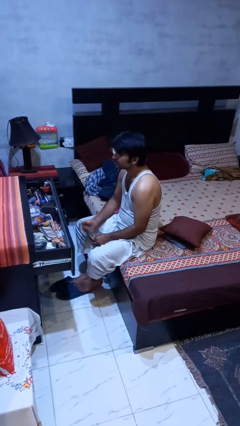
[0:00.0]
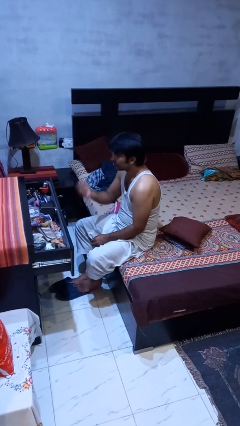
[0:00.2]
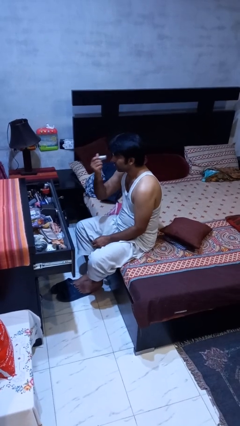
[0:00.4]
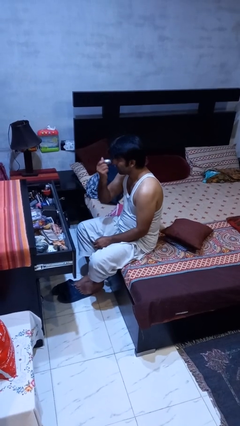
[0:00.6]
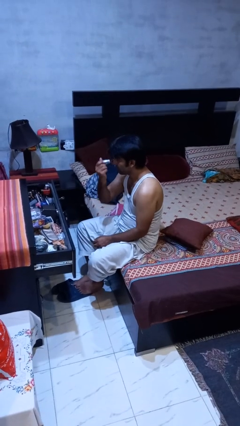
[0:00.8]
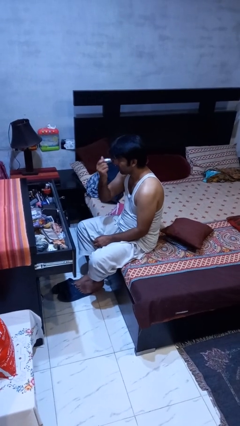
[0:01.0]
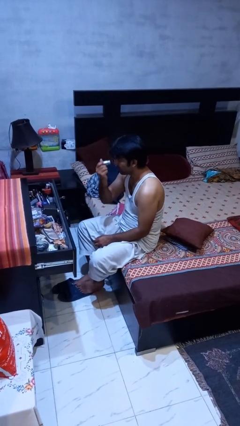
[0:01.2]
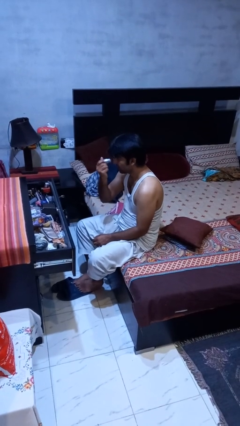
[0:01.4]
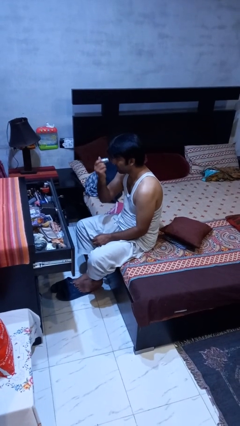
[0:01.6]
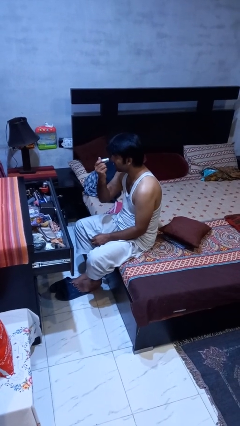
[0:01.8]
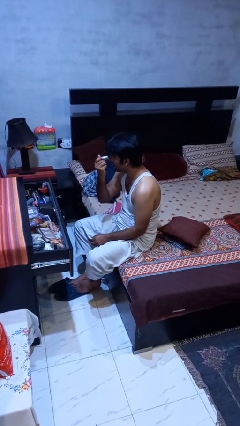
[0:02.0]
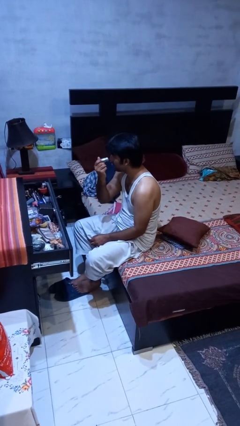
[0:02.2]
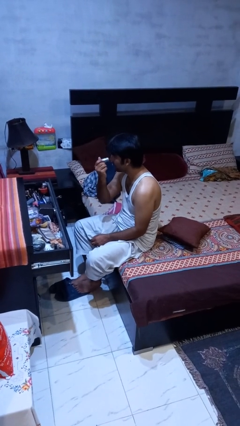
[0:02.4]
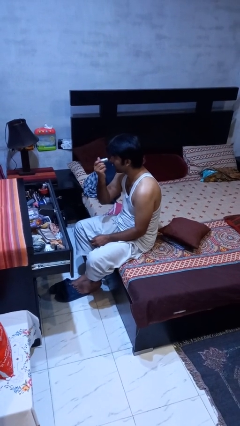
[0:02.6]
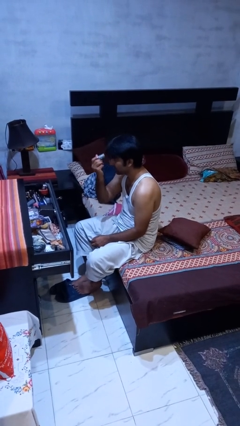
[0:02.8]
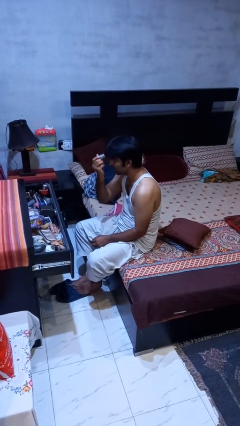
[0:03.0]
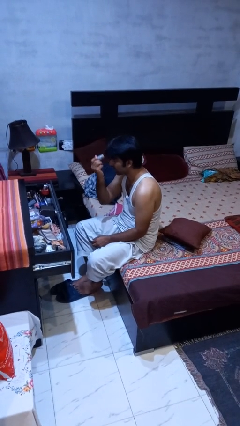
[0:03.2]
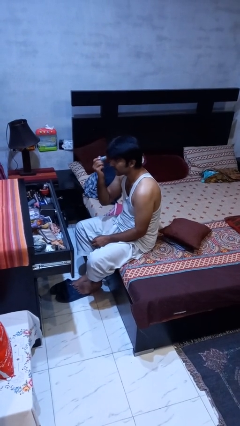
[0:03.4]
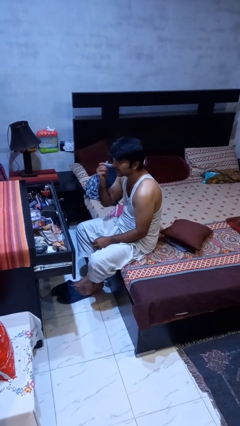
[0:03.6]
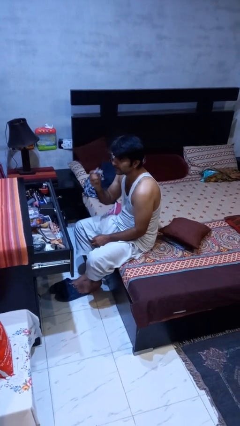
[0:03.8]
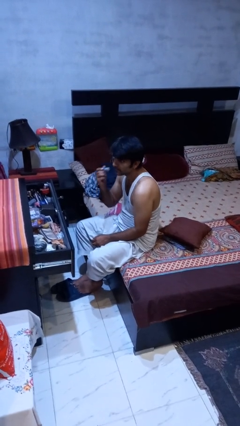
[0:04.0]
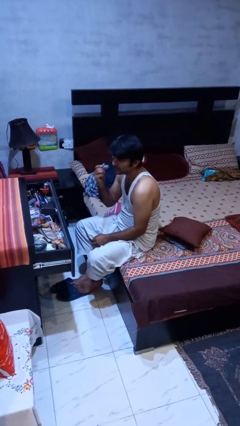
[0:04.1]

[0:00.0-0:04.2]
person applies foundation makeup

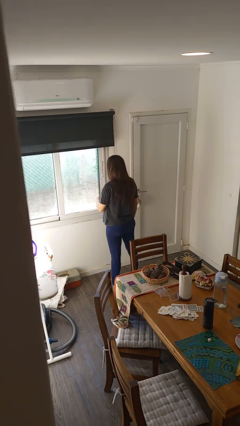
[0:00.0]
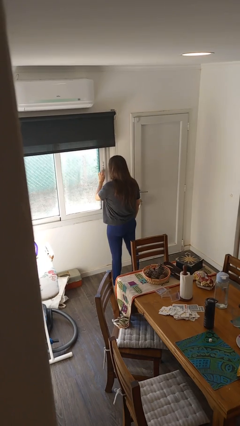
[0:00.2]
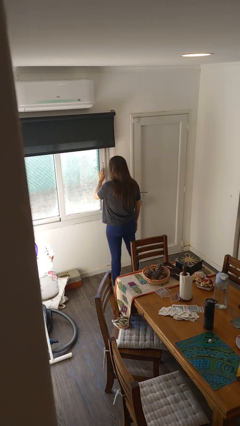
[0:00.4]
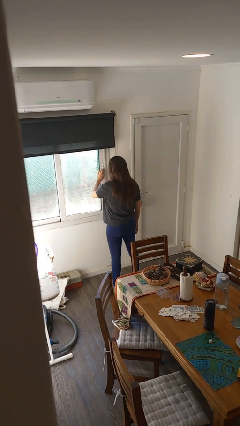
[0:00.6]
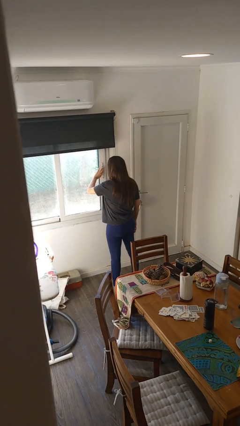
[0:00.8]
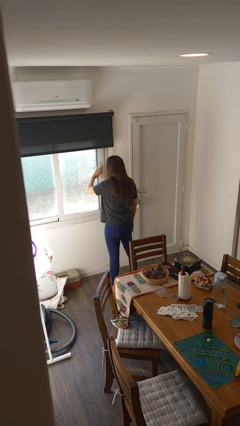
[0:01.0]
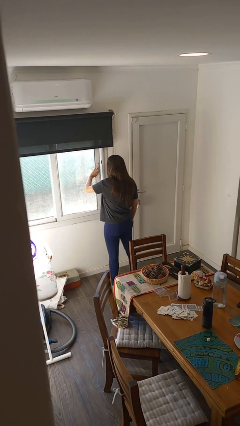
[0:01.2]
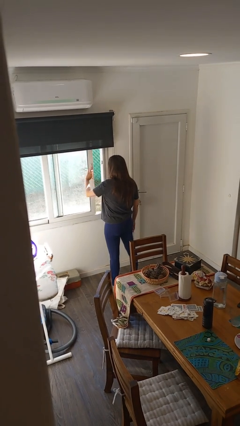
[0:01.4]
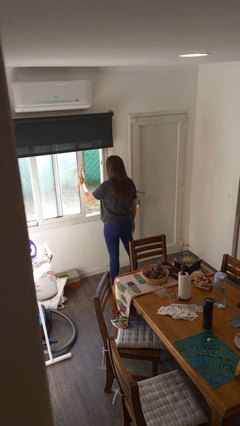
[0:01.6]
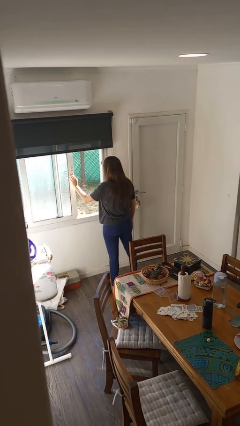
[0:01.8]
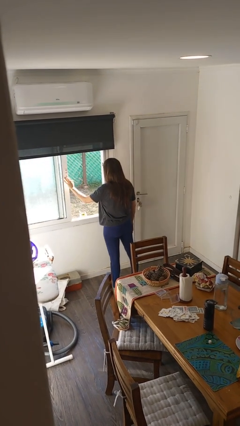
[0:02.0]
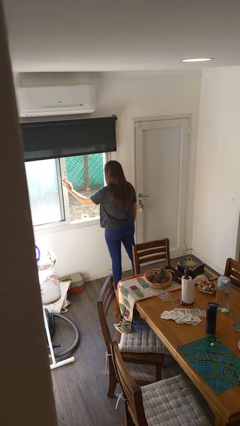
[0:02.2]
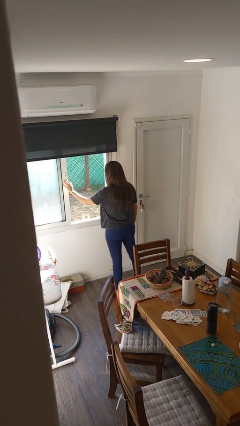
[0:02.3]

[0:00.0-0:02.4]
person opens home window

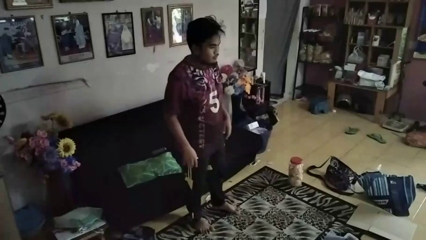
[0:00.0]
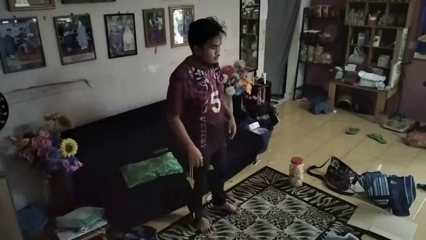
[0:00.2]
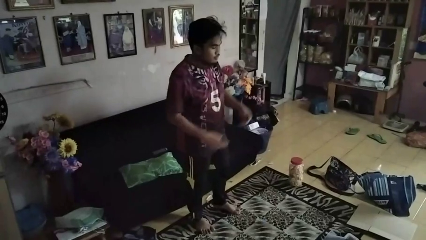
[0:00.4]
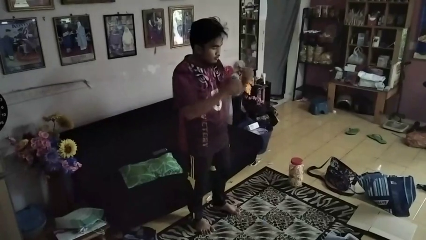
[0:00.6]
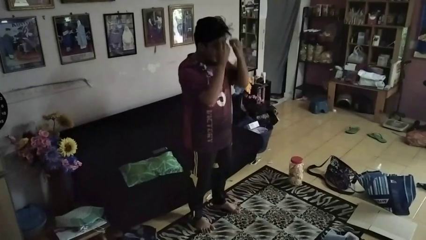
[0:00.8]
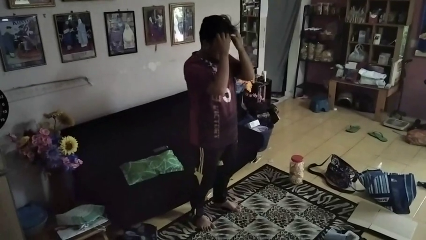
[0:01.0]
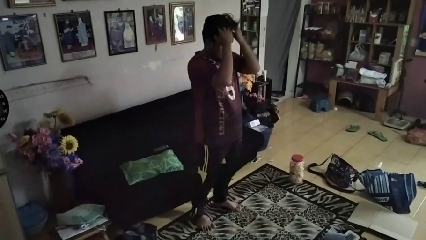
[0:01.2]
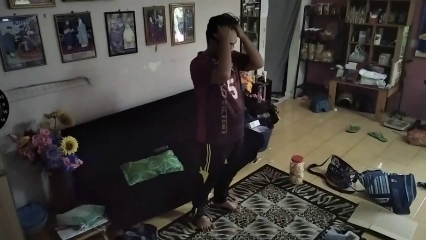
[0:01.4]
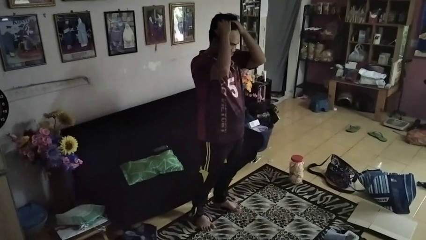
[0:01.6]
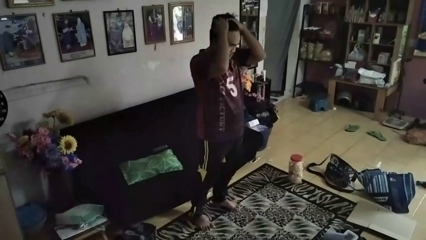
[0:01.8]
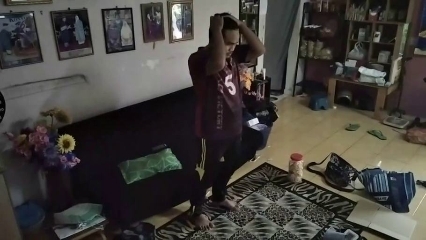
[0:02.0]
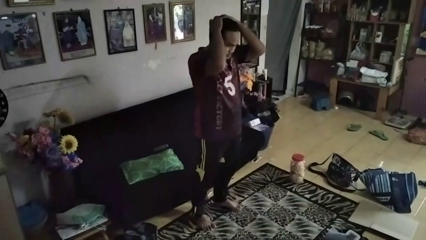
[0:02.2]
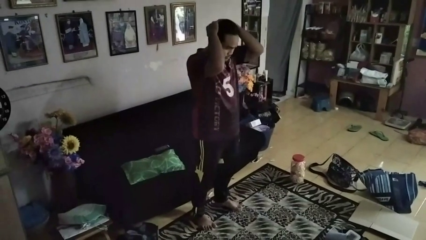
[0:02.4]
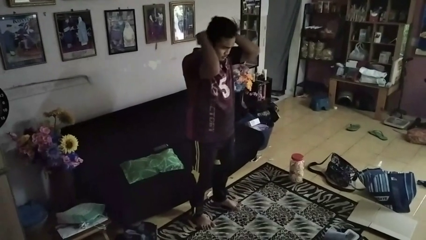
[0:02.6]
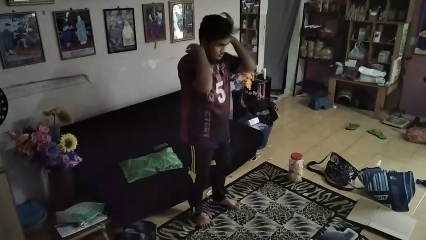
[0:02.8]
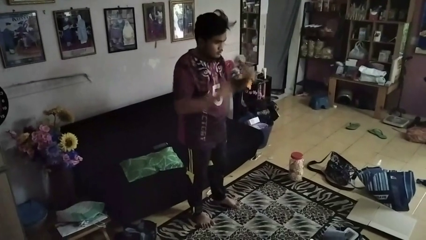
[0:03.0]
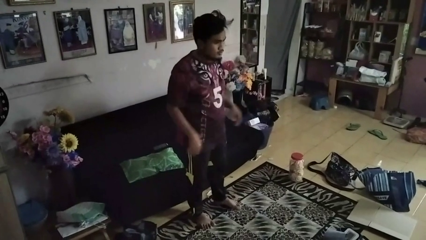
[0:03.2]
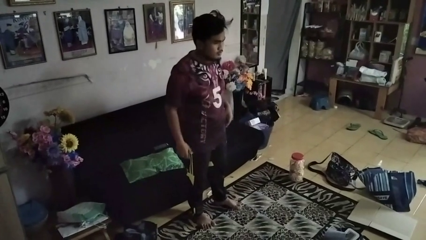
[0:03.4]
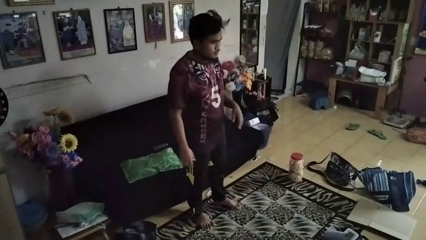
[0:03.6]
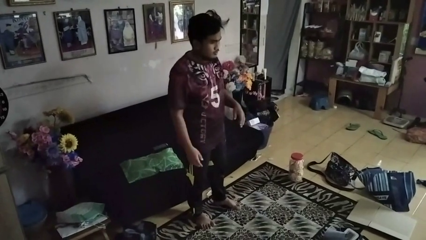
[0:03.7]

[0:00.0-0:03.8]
person strokes hair

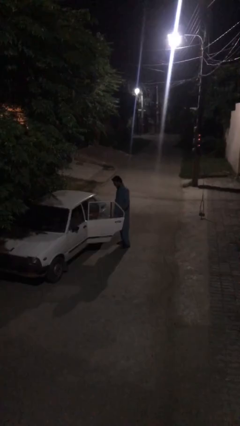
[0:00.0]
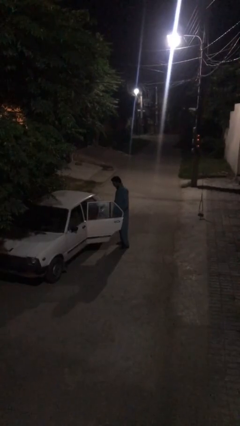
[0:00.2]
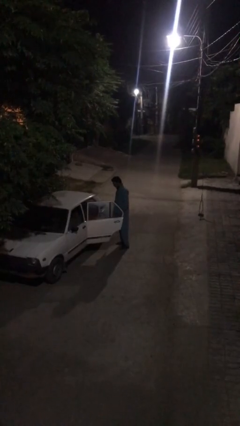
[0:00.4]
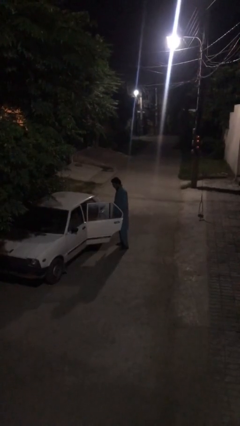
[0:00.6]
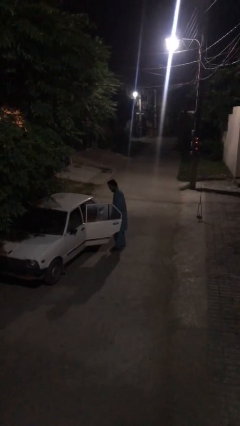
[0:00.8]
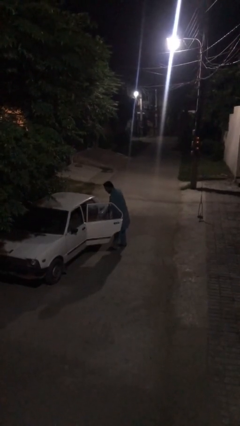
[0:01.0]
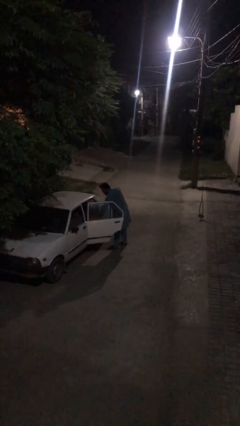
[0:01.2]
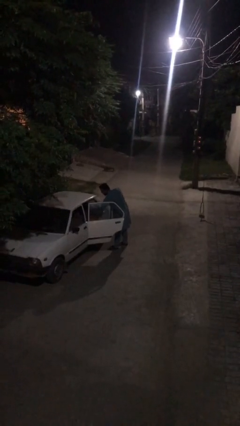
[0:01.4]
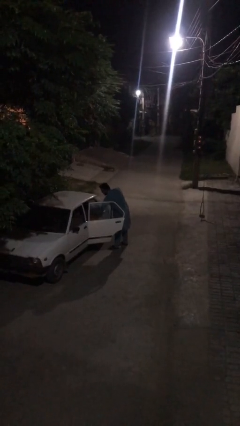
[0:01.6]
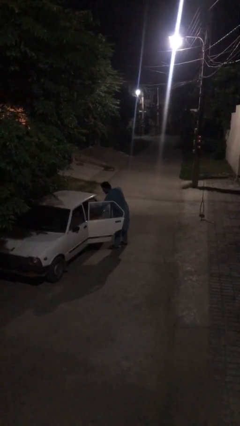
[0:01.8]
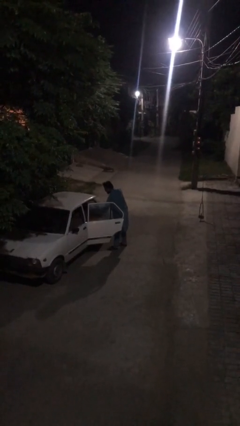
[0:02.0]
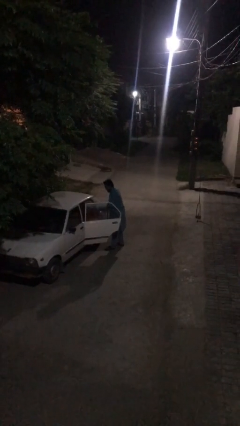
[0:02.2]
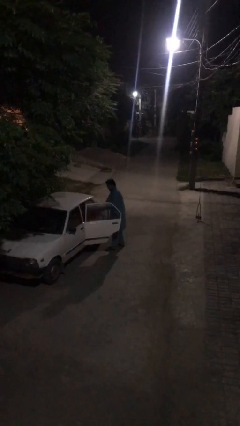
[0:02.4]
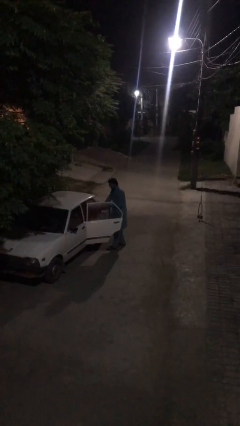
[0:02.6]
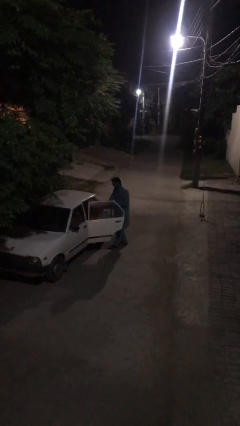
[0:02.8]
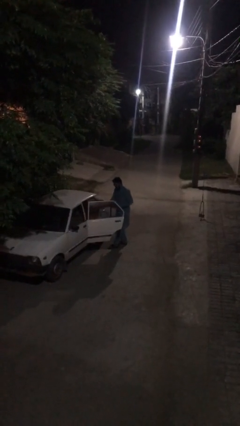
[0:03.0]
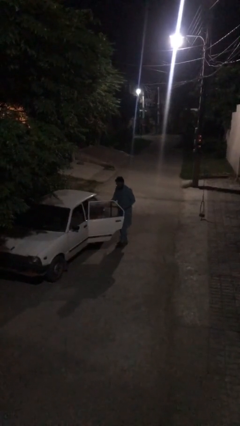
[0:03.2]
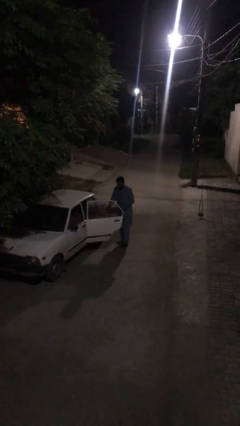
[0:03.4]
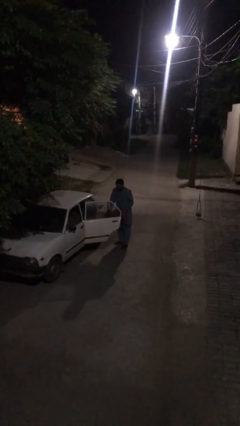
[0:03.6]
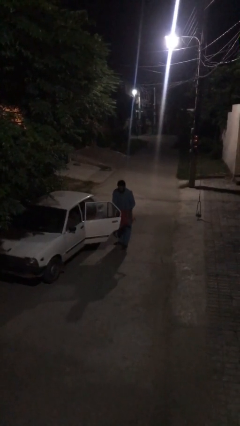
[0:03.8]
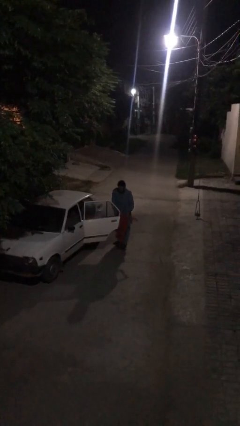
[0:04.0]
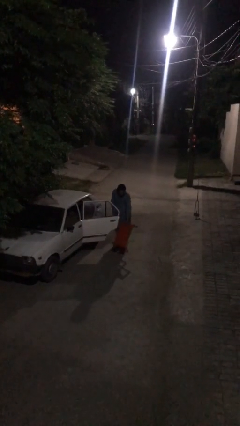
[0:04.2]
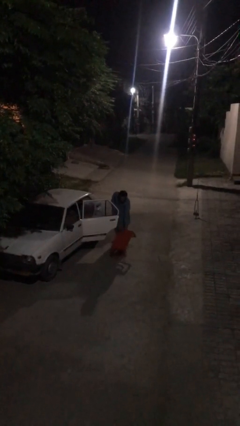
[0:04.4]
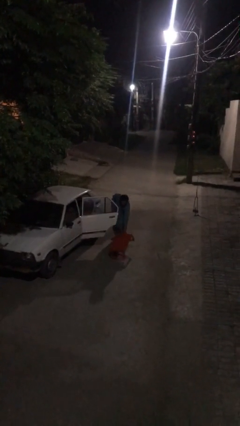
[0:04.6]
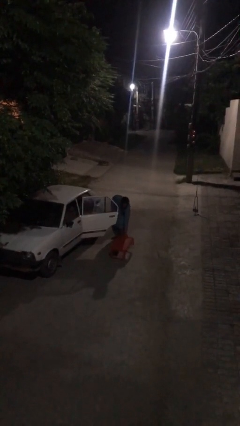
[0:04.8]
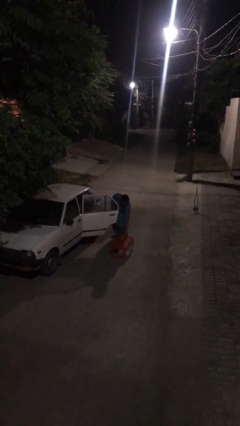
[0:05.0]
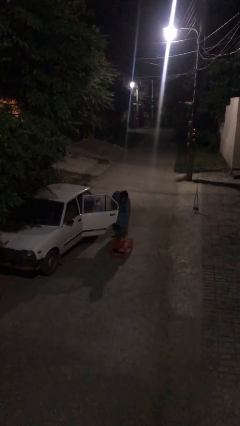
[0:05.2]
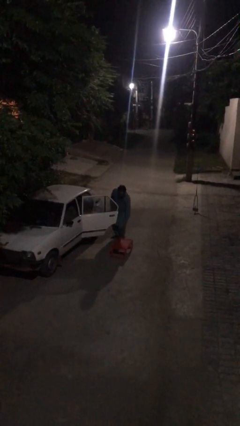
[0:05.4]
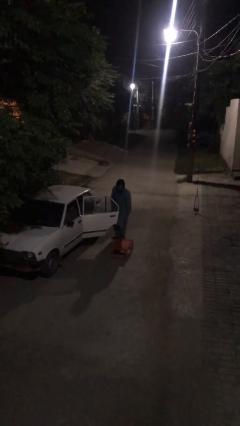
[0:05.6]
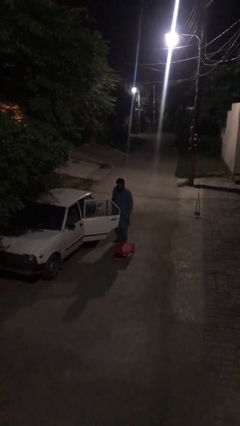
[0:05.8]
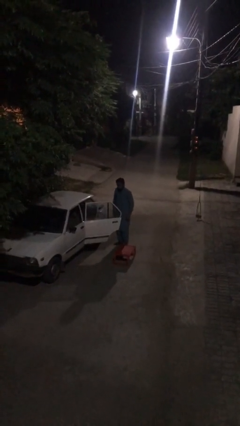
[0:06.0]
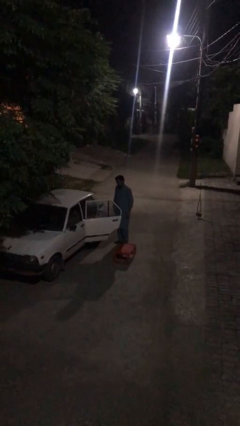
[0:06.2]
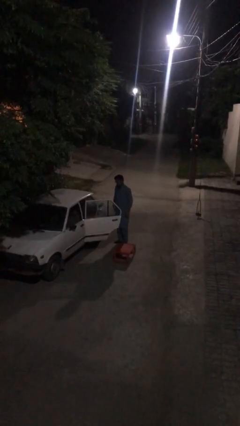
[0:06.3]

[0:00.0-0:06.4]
person unloads car

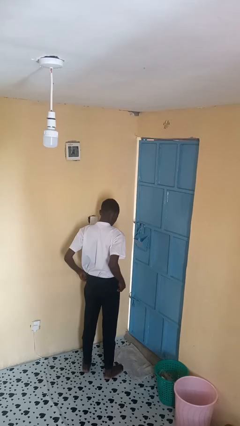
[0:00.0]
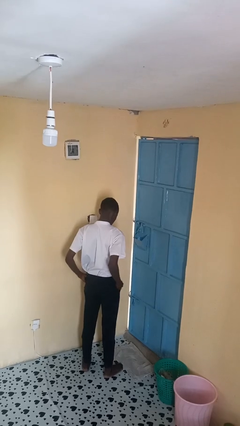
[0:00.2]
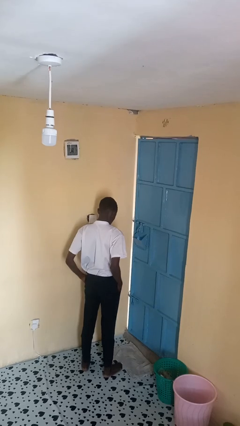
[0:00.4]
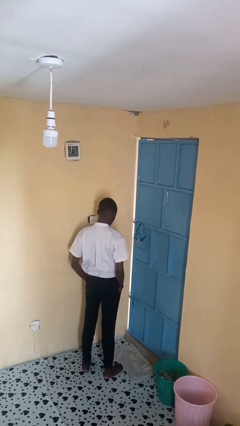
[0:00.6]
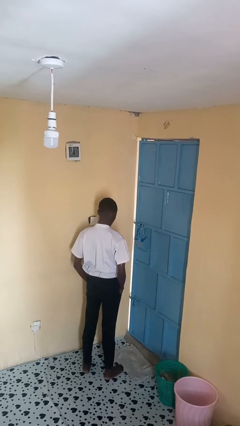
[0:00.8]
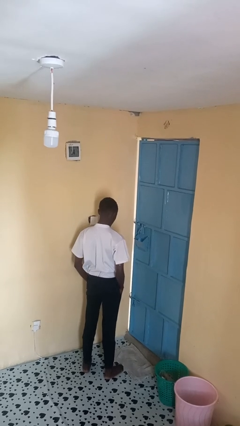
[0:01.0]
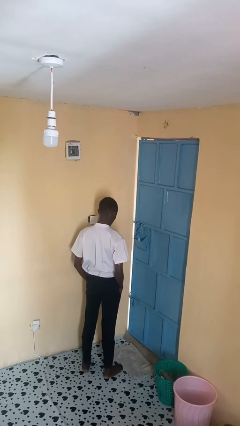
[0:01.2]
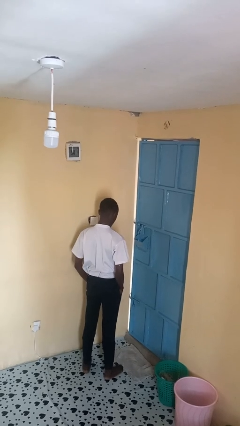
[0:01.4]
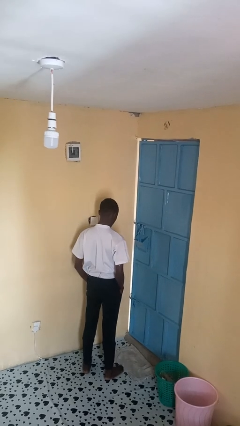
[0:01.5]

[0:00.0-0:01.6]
person puts hands in back pockets
